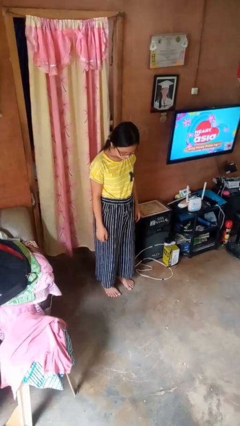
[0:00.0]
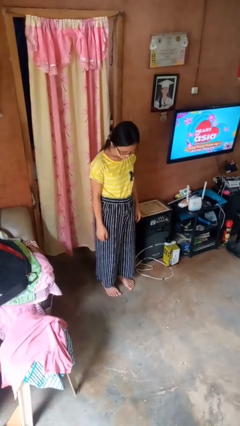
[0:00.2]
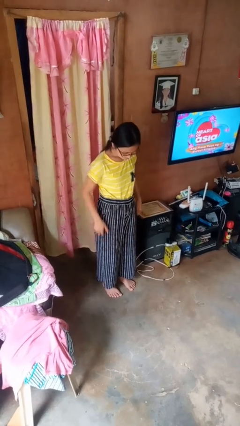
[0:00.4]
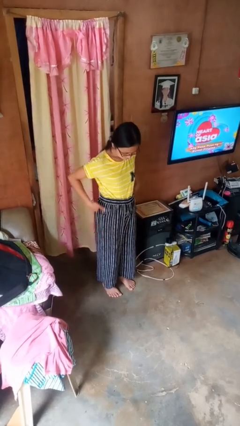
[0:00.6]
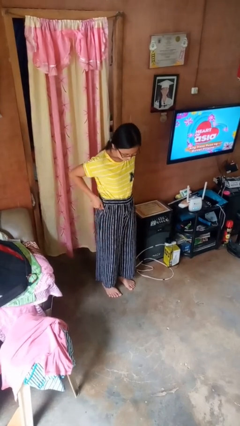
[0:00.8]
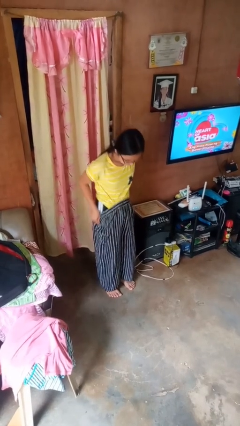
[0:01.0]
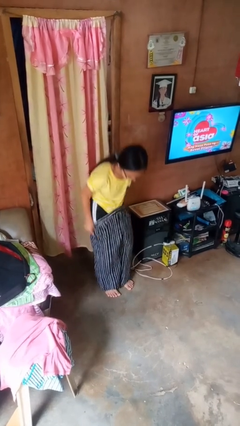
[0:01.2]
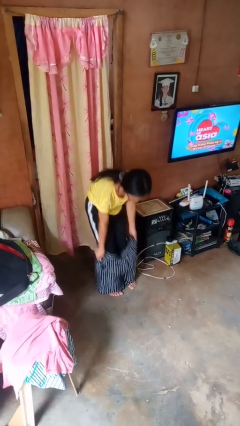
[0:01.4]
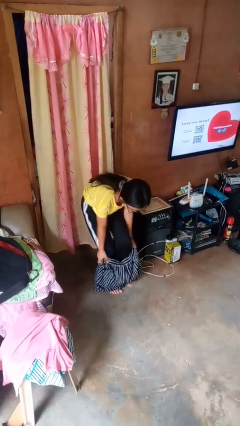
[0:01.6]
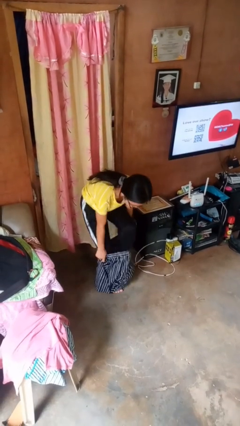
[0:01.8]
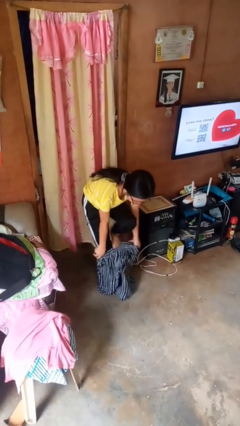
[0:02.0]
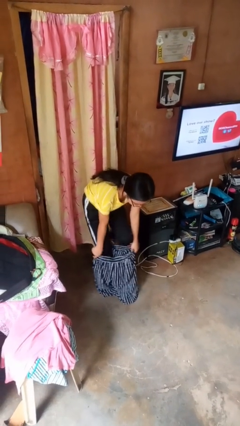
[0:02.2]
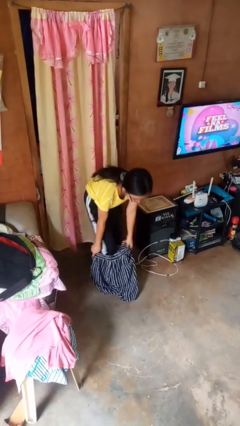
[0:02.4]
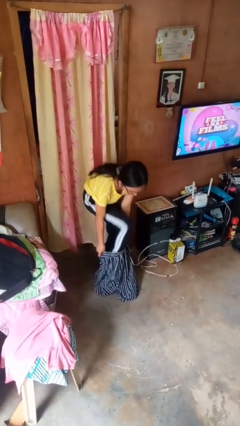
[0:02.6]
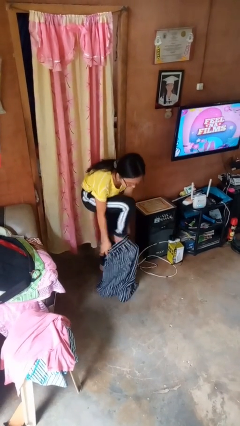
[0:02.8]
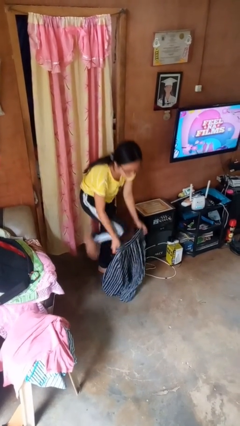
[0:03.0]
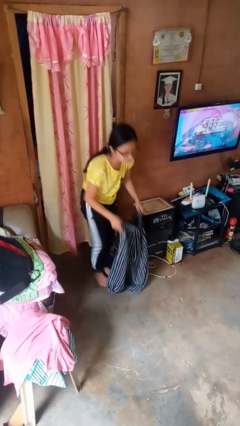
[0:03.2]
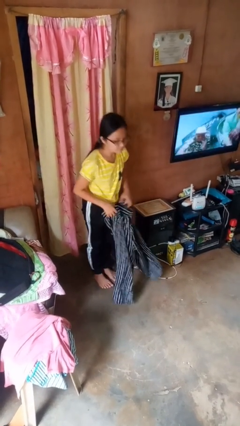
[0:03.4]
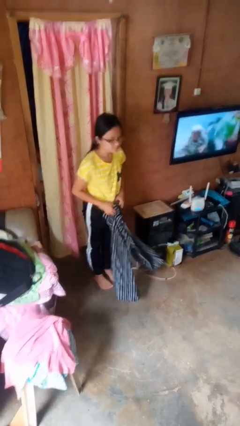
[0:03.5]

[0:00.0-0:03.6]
person takes off pants

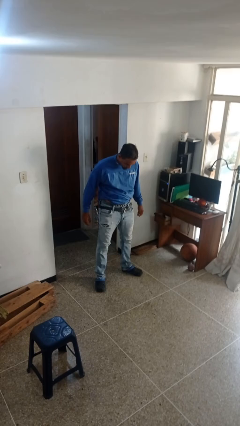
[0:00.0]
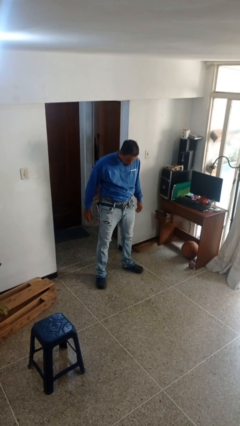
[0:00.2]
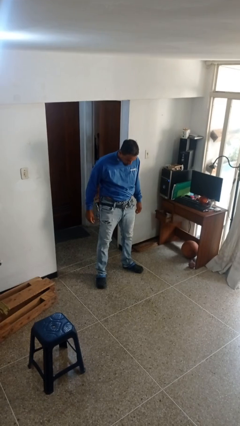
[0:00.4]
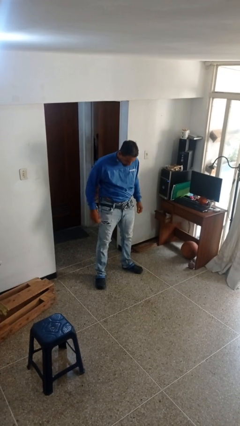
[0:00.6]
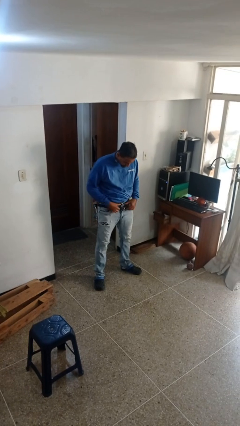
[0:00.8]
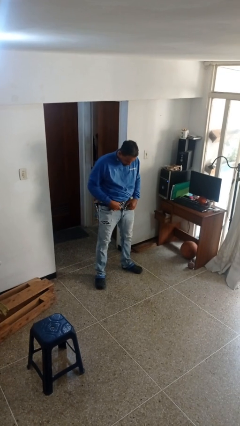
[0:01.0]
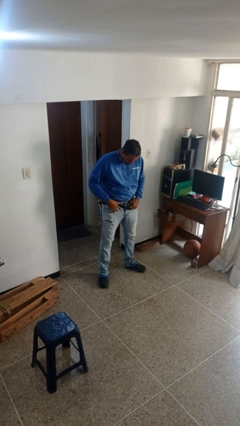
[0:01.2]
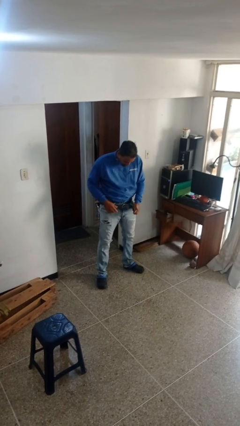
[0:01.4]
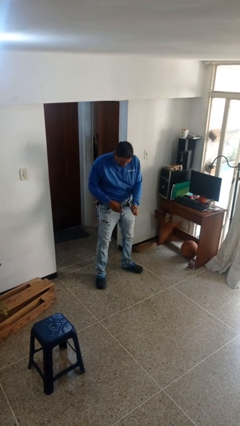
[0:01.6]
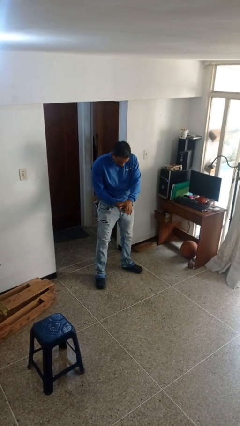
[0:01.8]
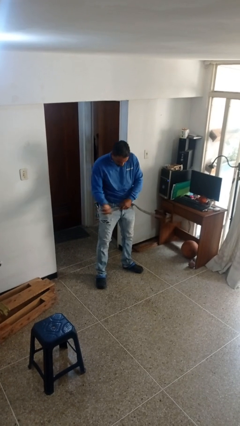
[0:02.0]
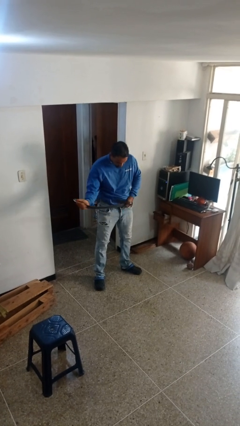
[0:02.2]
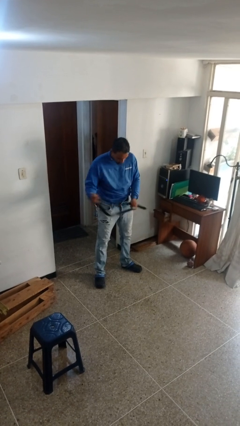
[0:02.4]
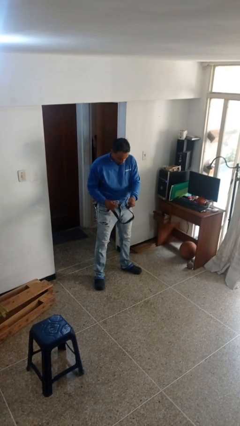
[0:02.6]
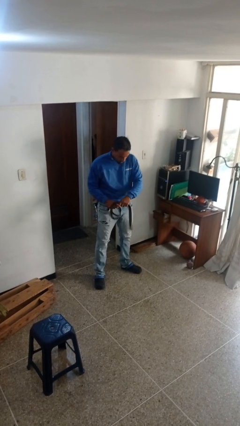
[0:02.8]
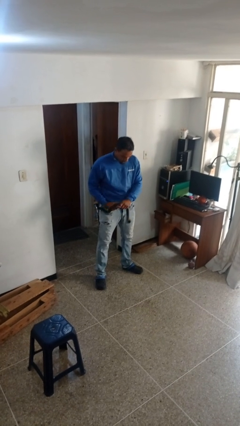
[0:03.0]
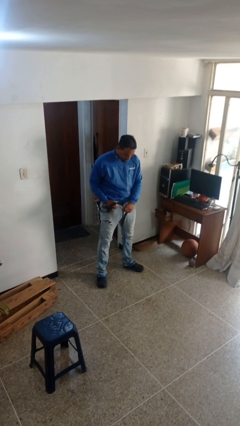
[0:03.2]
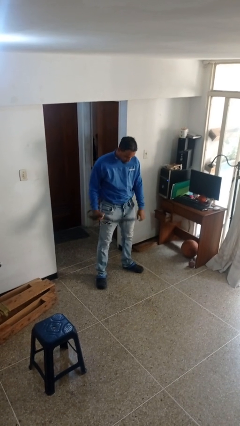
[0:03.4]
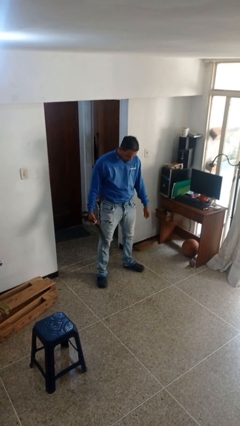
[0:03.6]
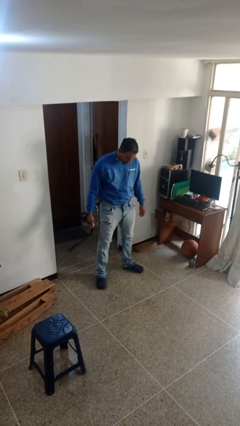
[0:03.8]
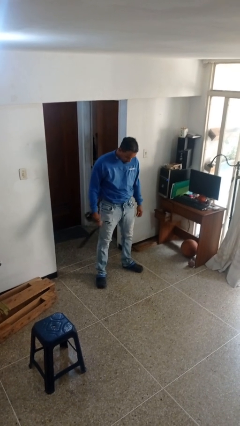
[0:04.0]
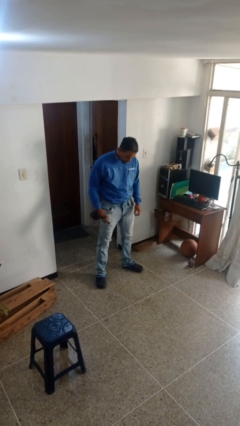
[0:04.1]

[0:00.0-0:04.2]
person takes off belt

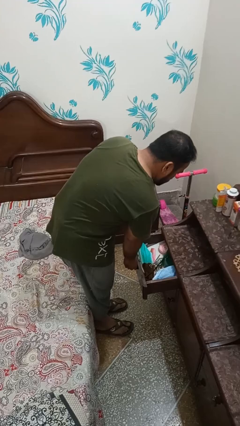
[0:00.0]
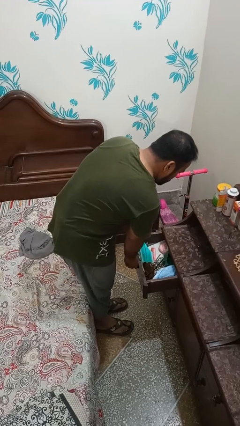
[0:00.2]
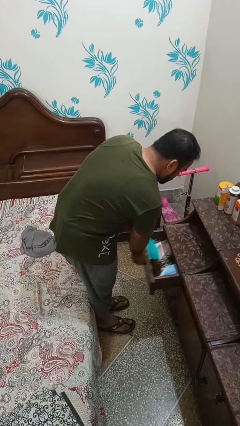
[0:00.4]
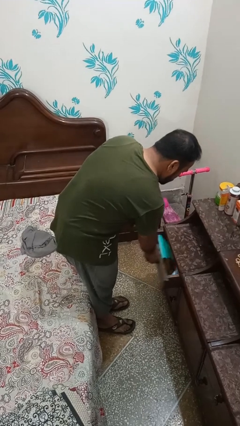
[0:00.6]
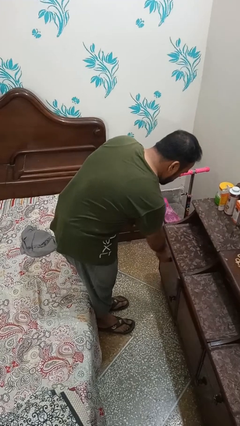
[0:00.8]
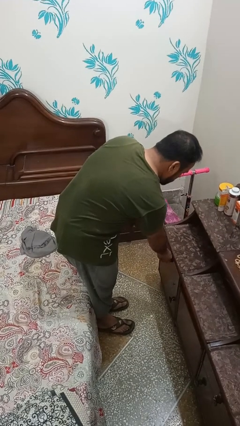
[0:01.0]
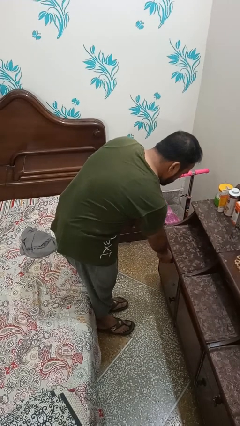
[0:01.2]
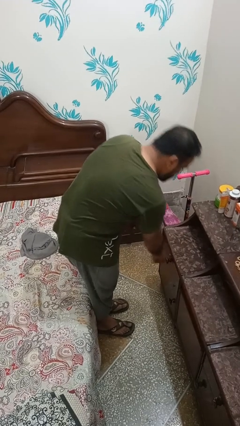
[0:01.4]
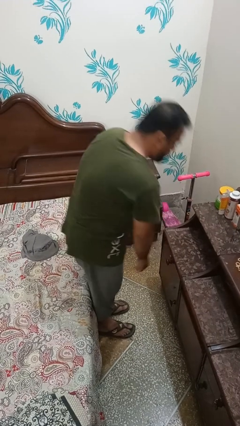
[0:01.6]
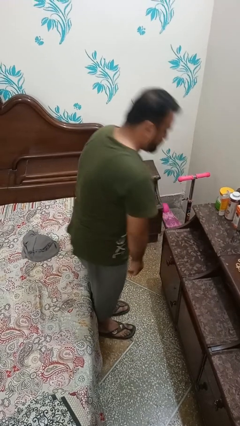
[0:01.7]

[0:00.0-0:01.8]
person closes dresser drawer

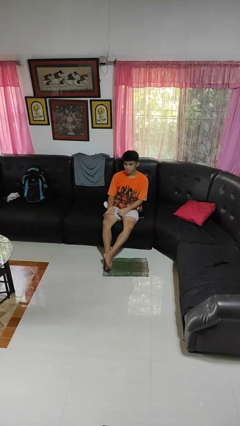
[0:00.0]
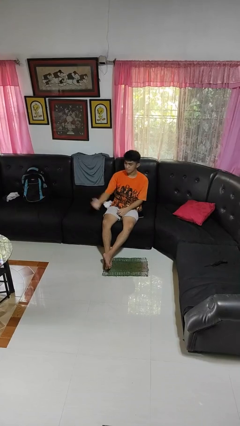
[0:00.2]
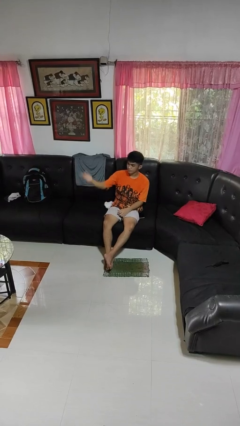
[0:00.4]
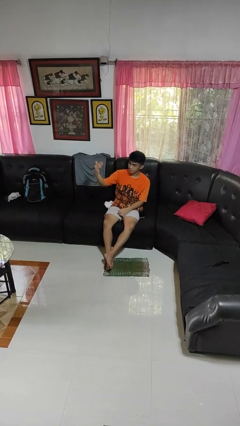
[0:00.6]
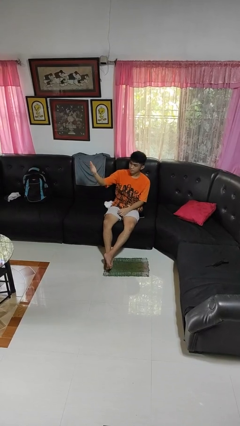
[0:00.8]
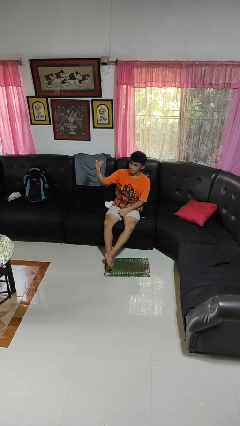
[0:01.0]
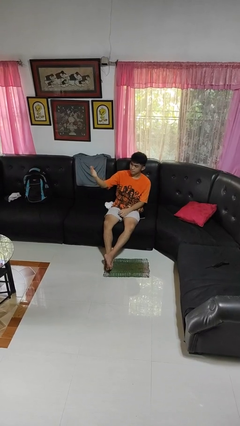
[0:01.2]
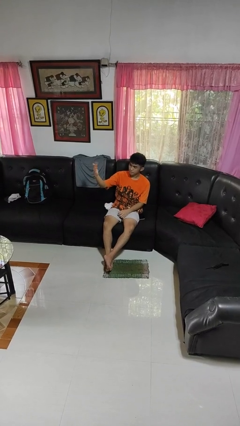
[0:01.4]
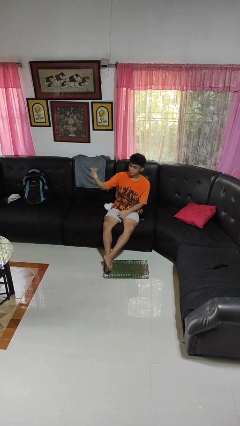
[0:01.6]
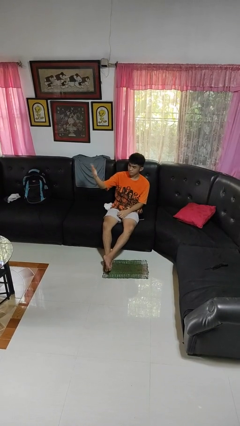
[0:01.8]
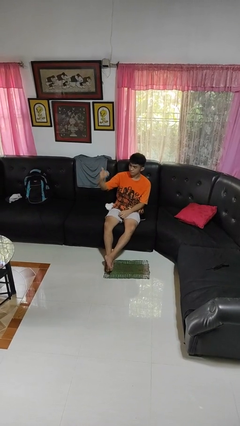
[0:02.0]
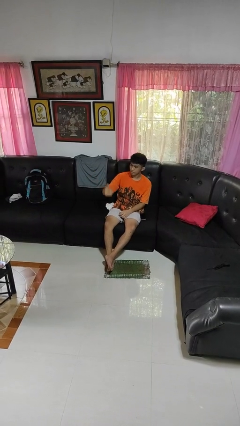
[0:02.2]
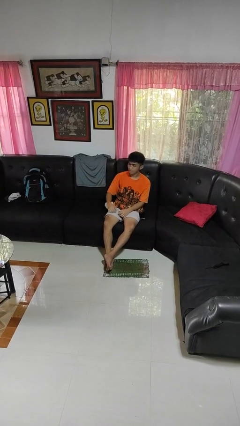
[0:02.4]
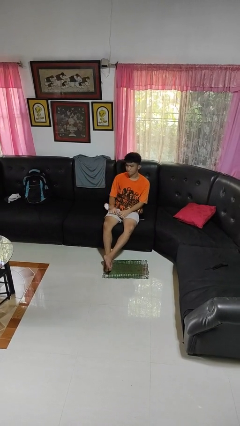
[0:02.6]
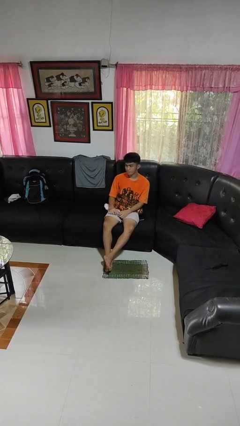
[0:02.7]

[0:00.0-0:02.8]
person gestures come here

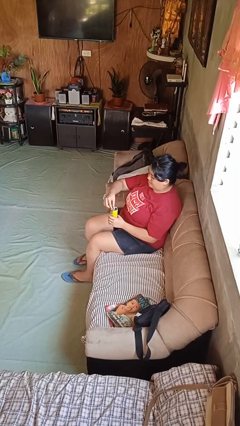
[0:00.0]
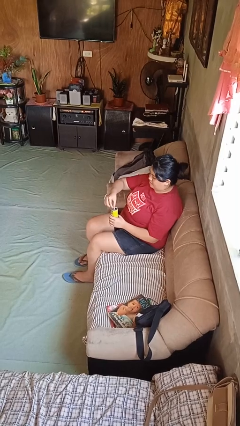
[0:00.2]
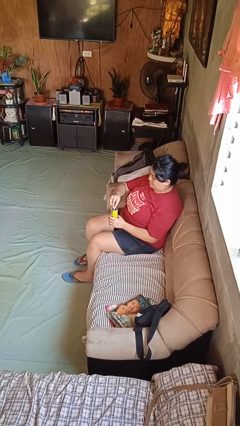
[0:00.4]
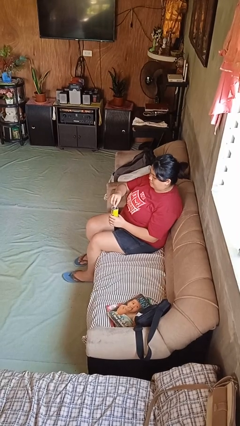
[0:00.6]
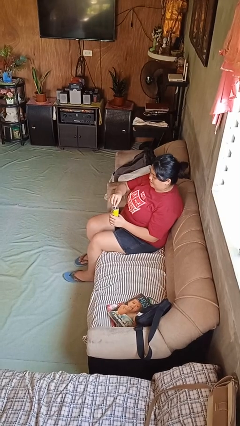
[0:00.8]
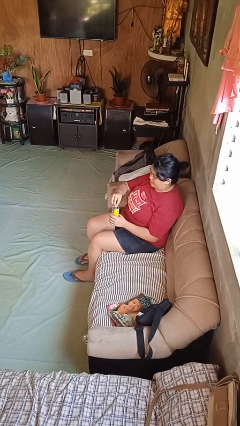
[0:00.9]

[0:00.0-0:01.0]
person opens beverage can

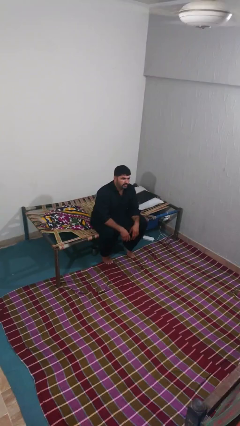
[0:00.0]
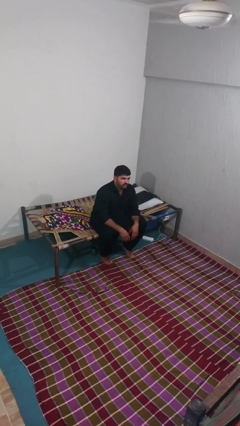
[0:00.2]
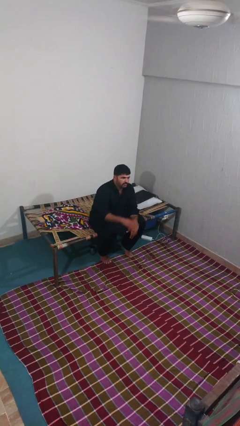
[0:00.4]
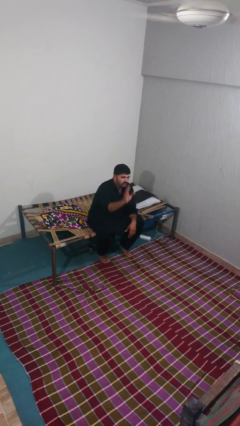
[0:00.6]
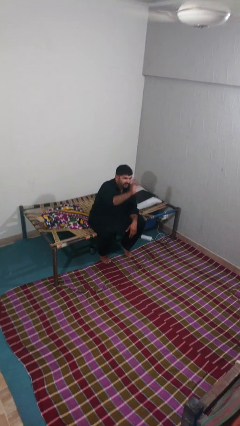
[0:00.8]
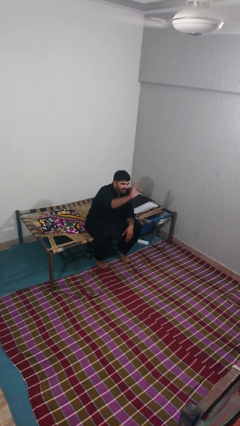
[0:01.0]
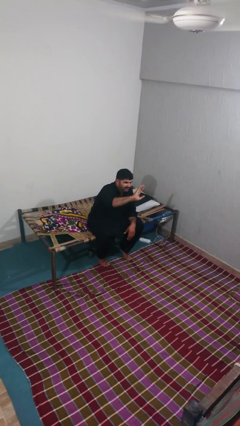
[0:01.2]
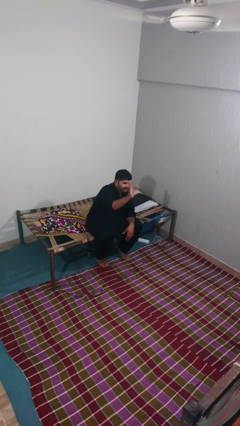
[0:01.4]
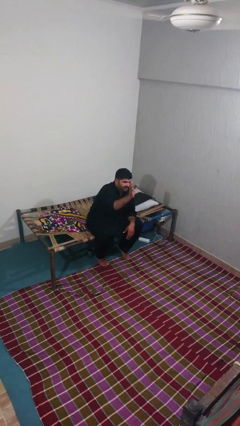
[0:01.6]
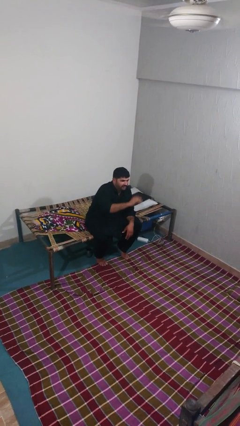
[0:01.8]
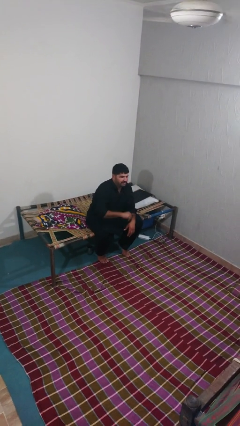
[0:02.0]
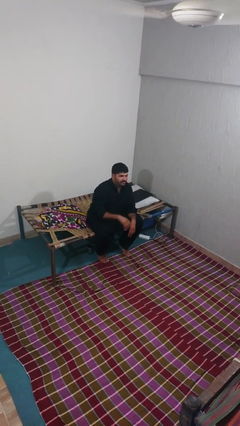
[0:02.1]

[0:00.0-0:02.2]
person waves at person

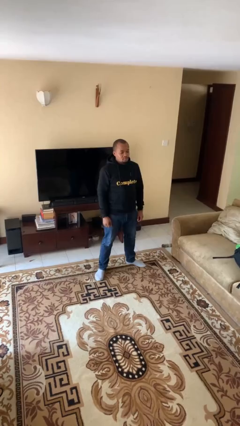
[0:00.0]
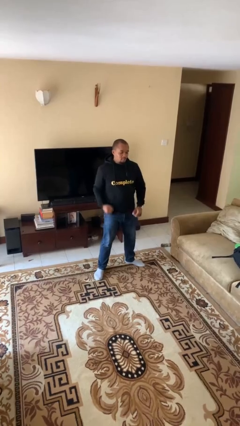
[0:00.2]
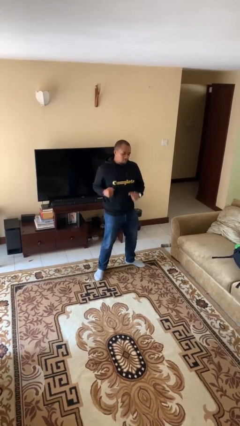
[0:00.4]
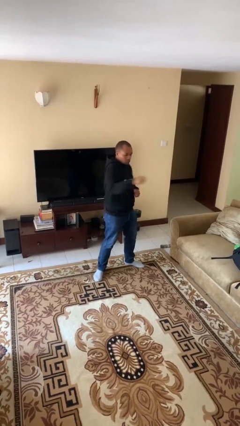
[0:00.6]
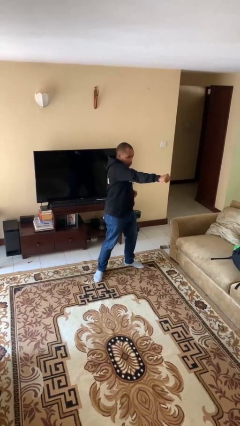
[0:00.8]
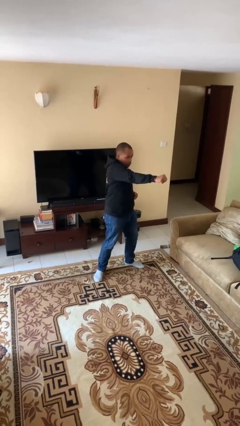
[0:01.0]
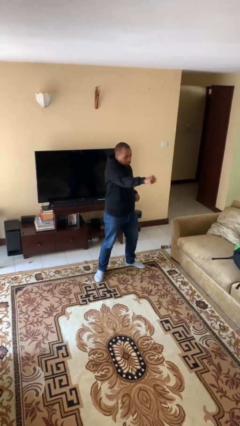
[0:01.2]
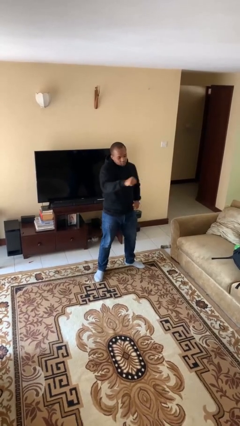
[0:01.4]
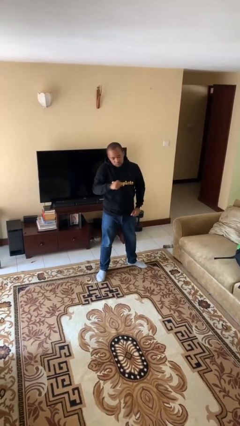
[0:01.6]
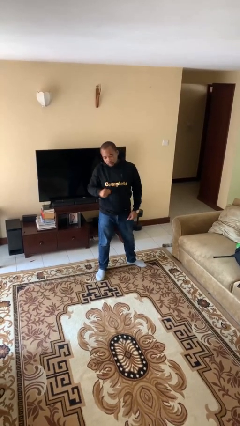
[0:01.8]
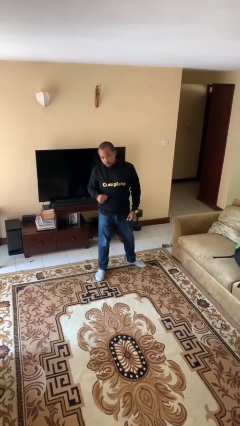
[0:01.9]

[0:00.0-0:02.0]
person punches
